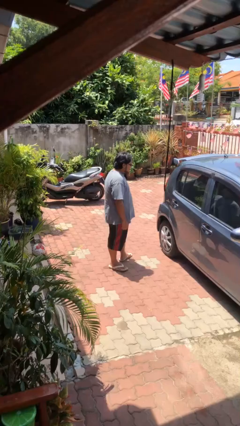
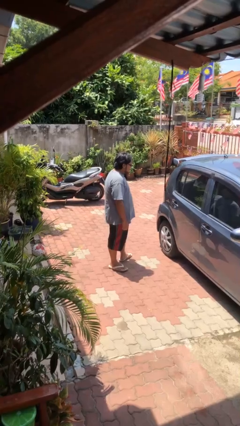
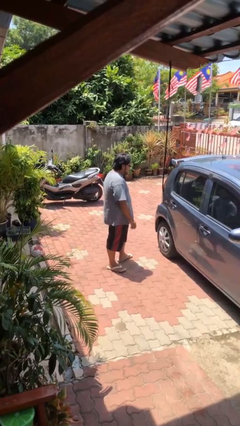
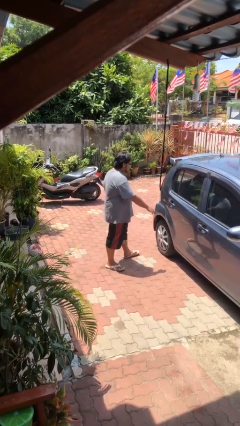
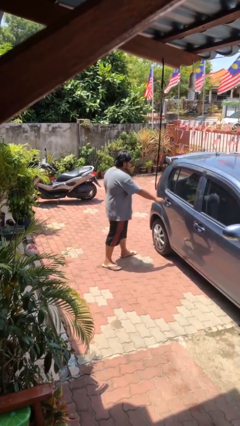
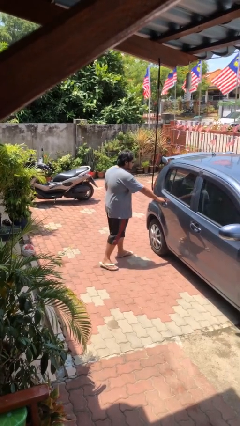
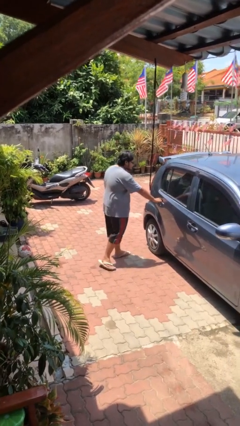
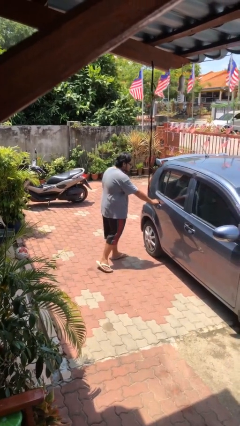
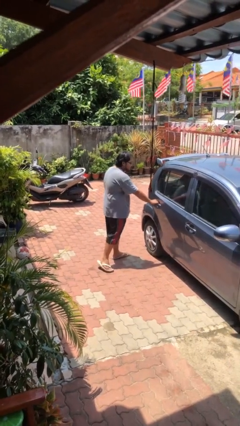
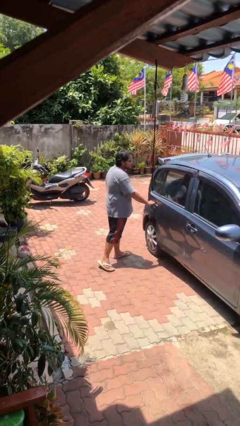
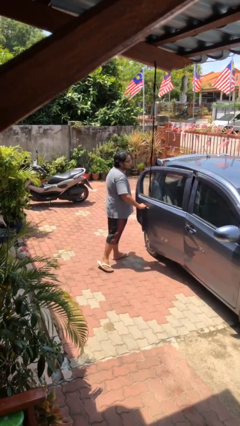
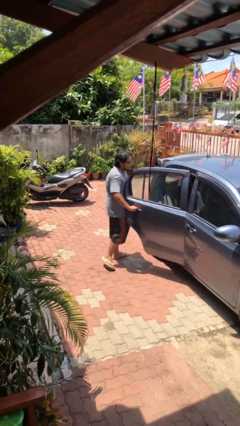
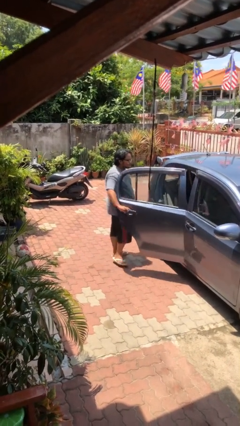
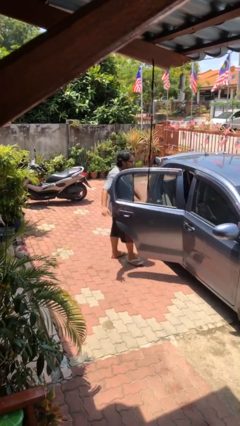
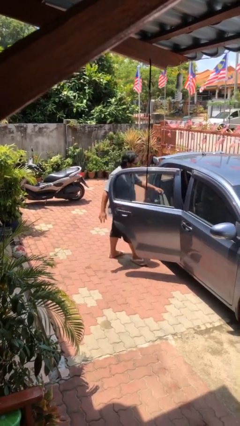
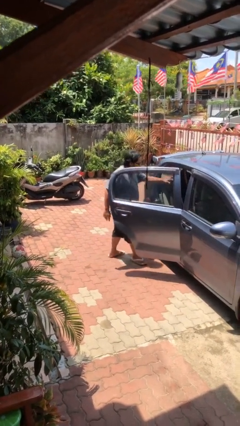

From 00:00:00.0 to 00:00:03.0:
person opens car door

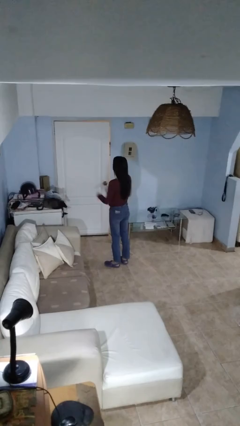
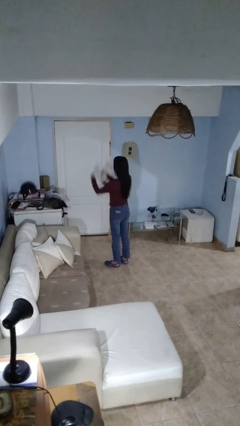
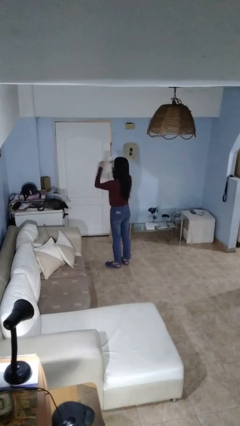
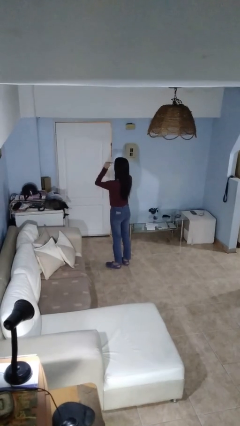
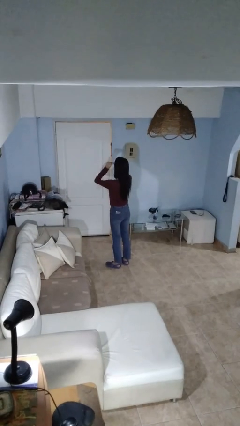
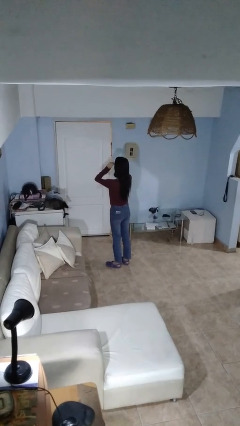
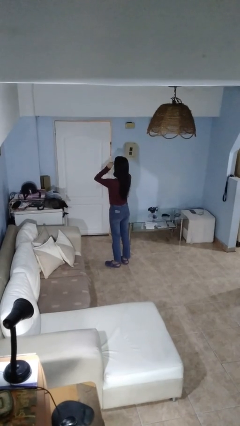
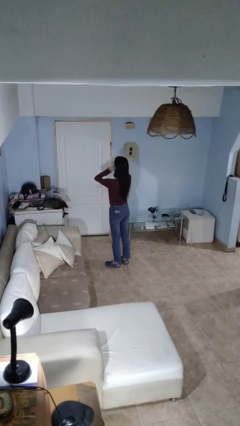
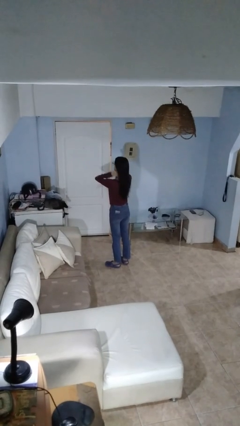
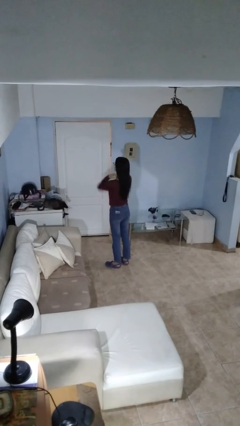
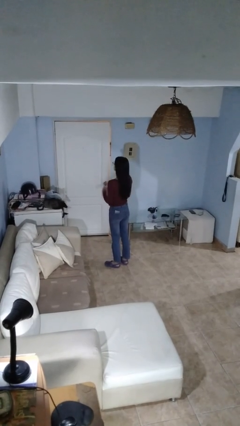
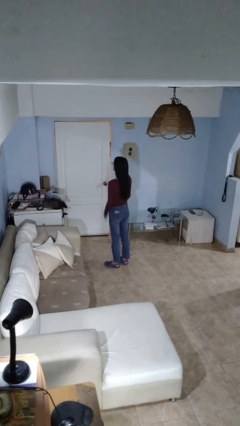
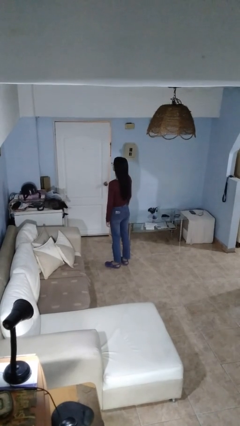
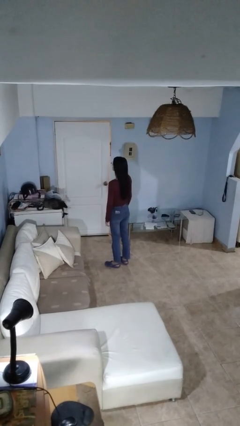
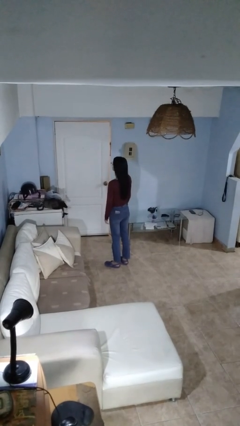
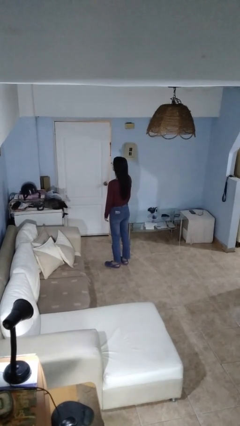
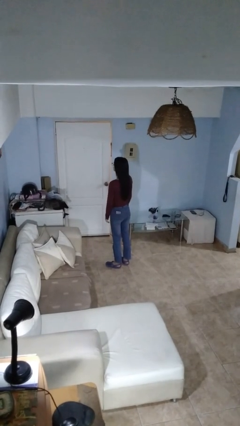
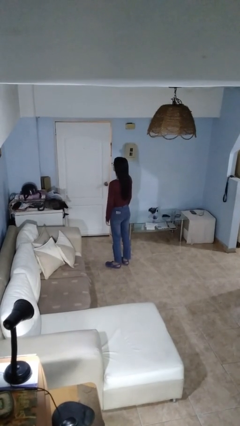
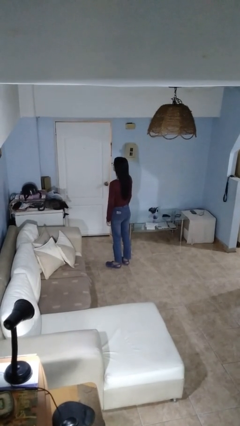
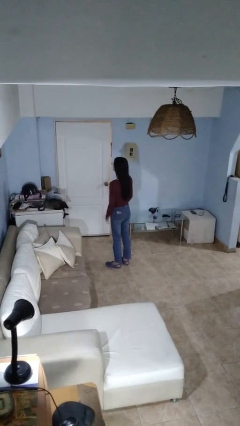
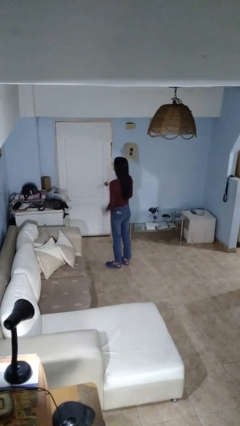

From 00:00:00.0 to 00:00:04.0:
person puts on glasses

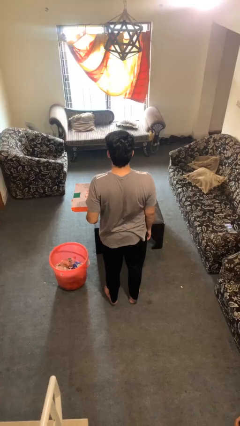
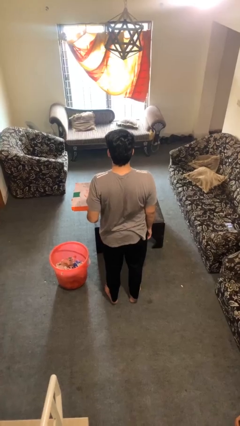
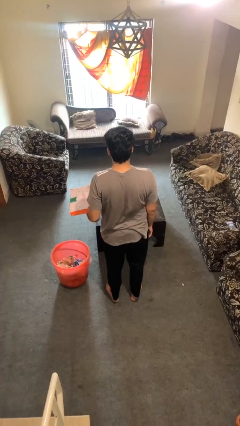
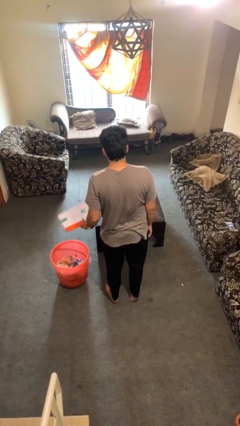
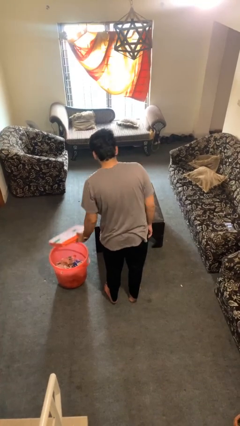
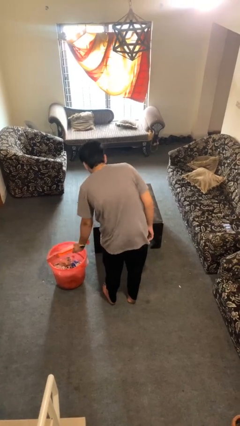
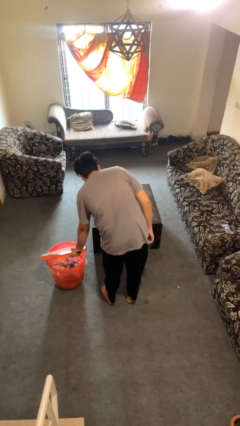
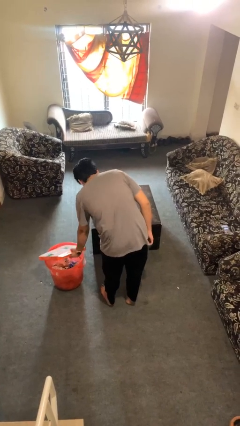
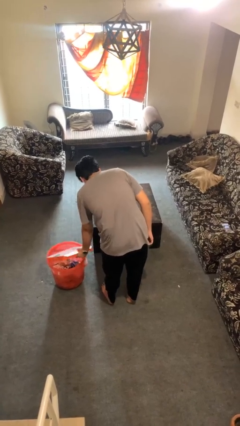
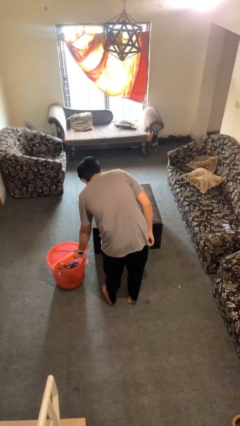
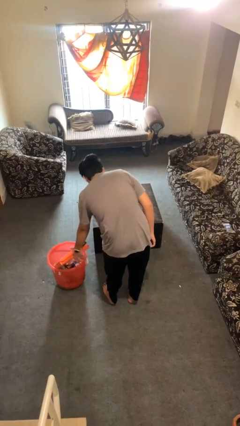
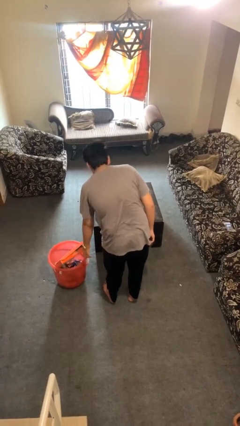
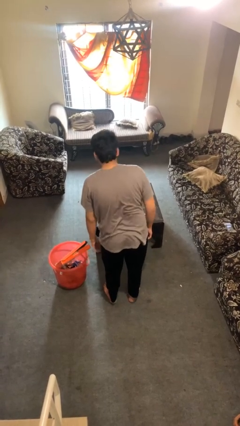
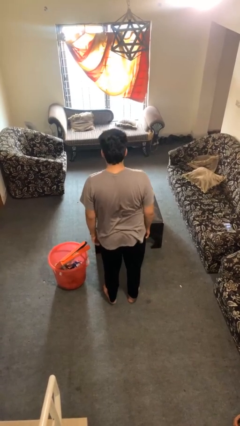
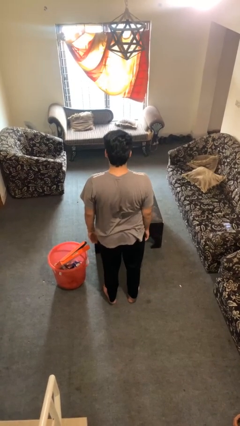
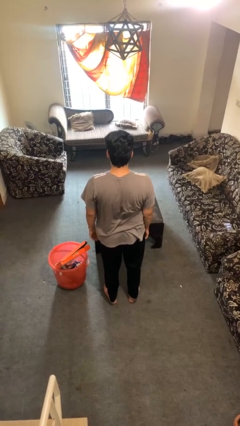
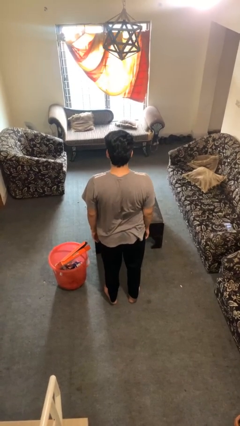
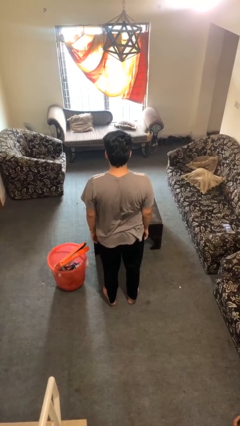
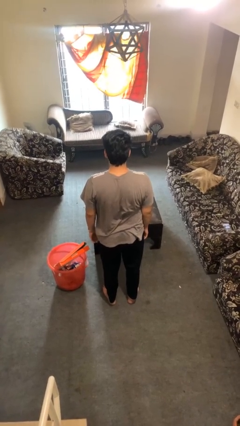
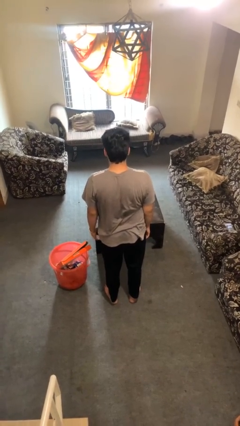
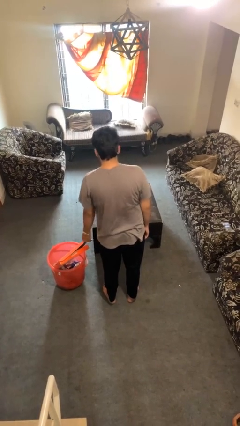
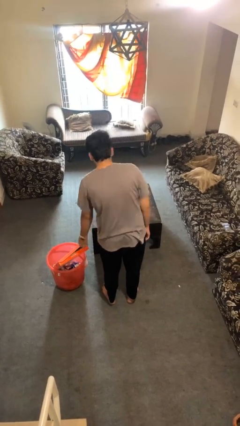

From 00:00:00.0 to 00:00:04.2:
person puts object into basket

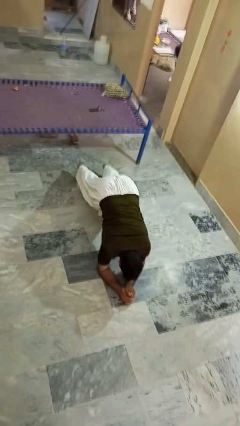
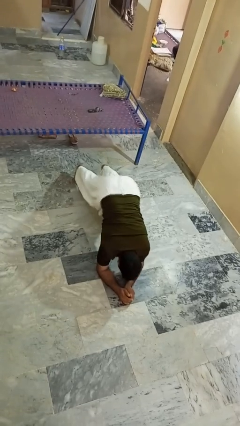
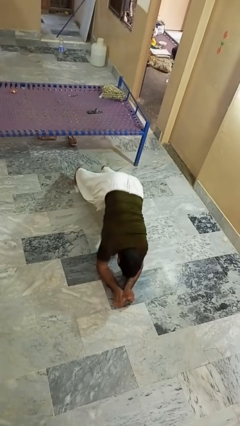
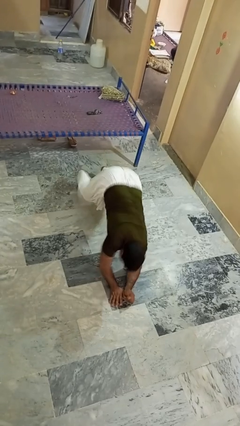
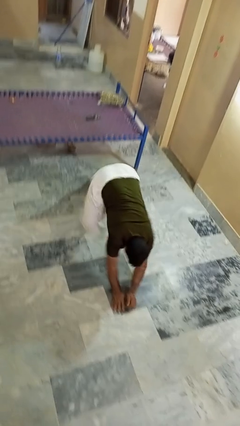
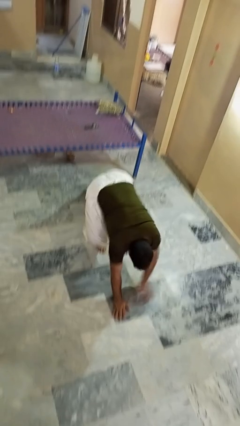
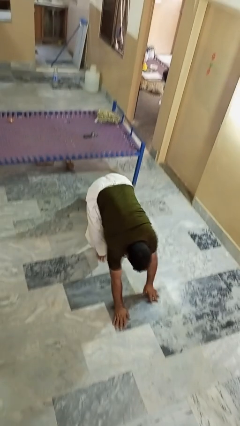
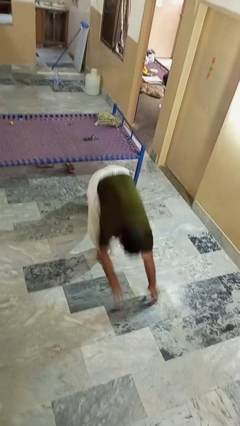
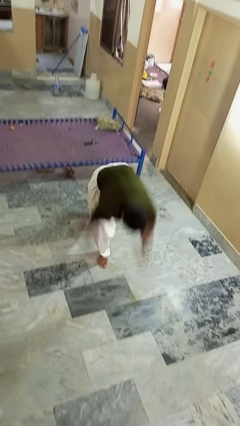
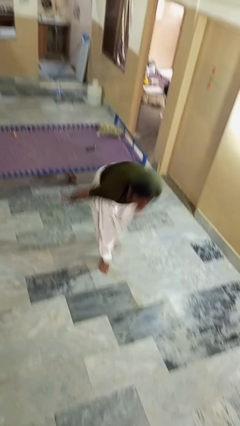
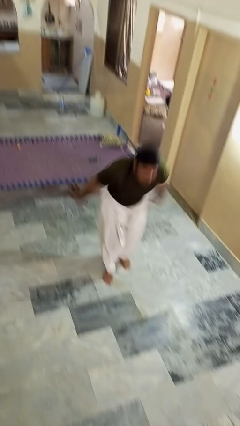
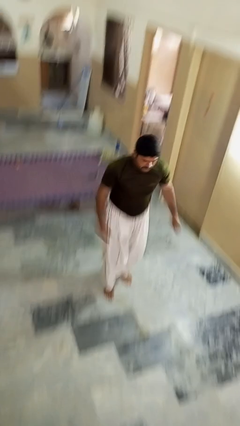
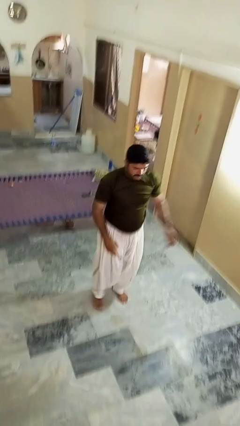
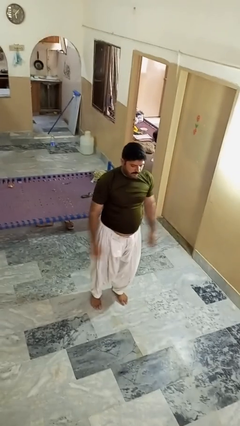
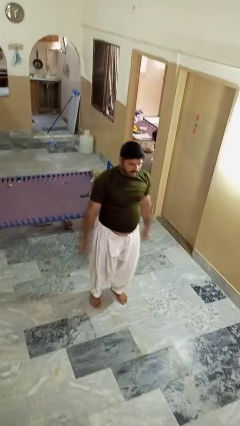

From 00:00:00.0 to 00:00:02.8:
person stands up from floor

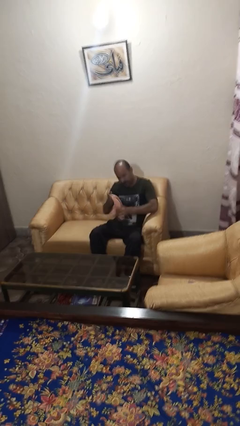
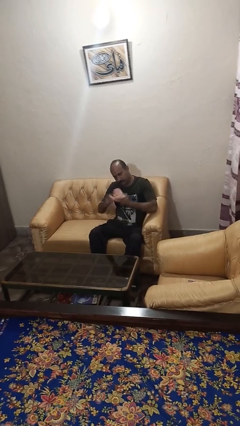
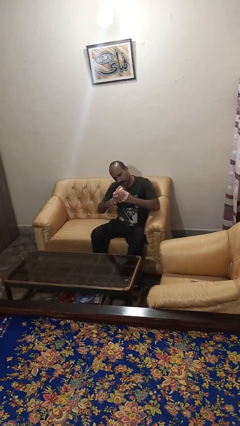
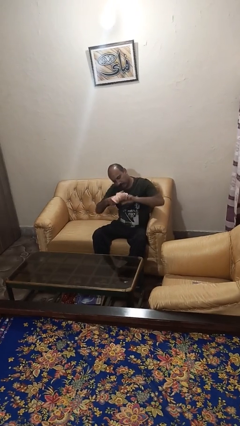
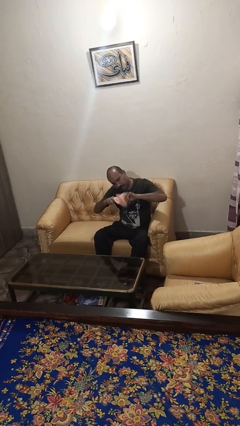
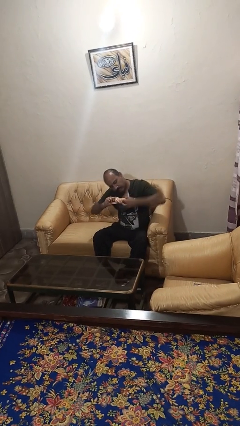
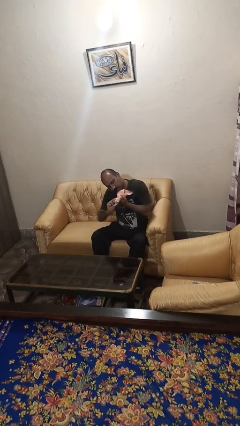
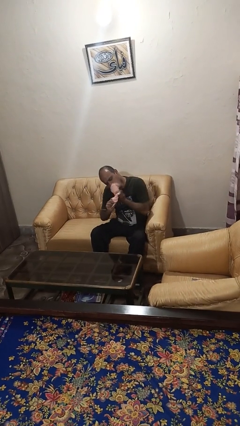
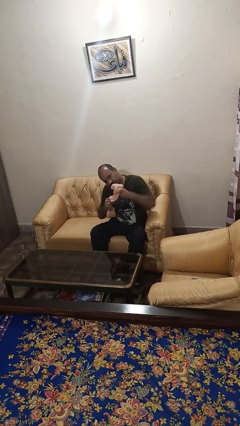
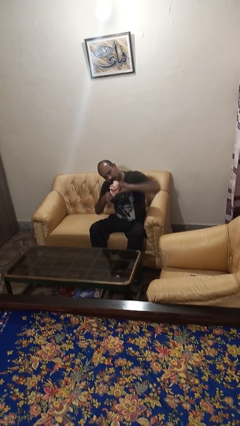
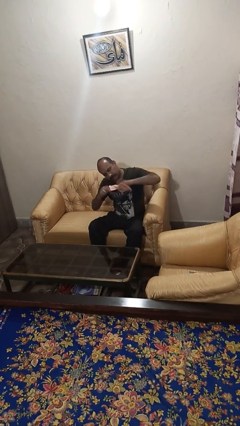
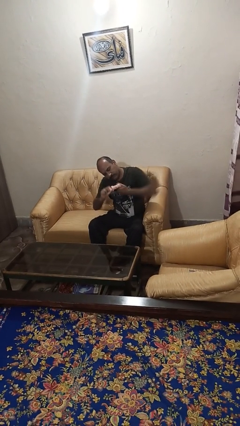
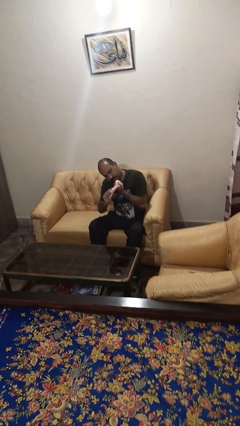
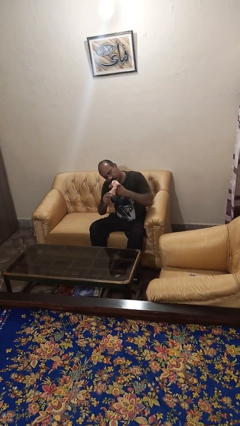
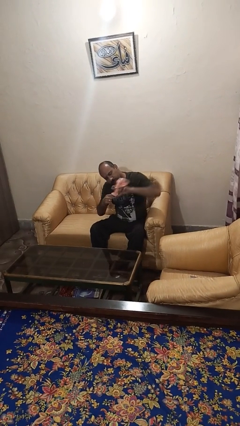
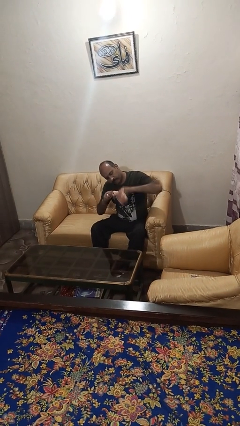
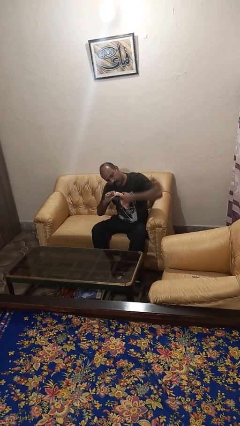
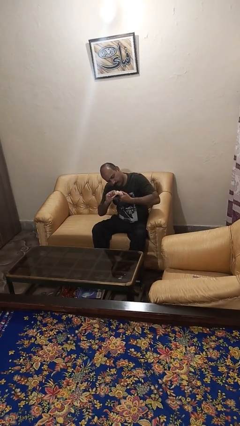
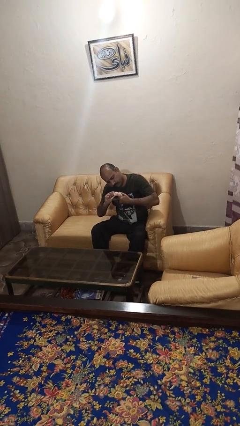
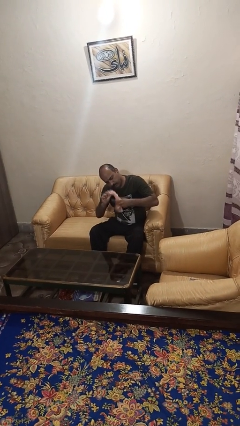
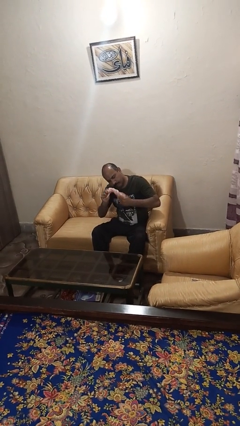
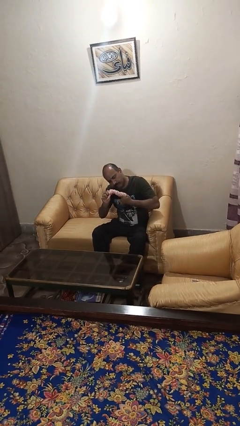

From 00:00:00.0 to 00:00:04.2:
person squeezes object
